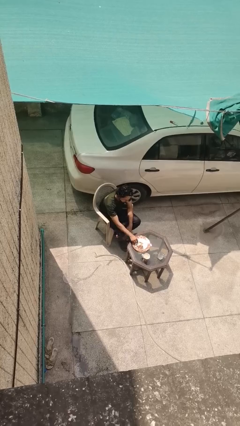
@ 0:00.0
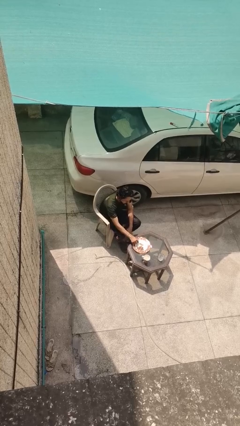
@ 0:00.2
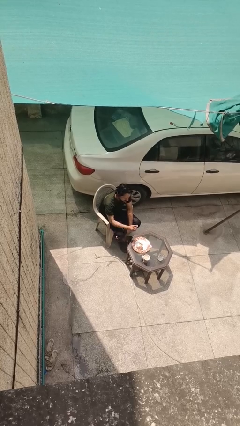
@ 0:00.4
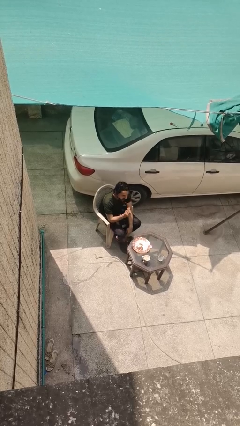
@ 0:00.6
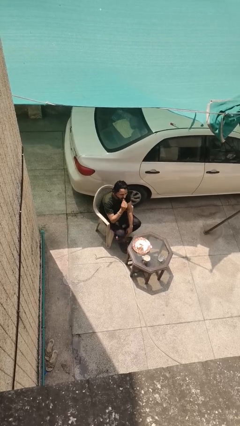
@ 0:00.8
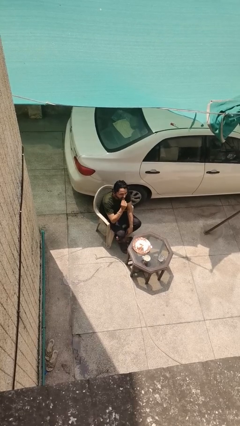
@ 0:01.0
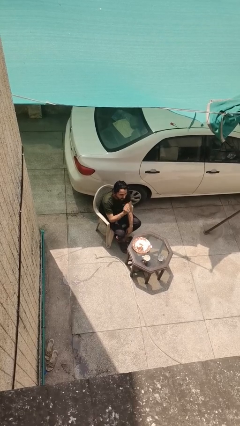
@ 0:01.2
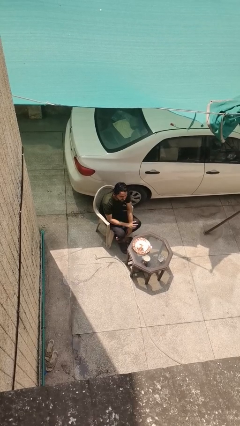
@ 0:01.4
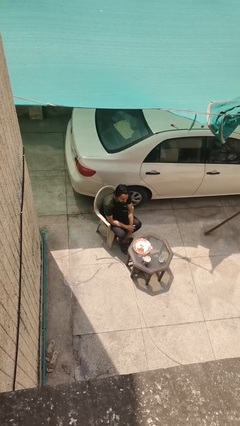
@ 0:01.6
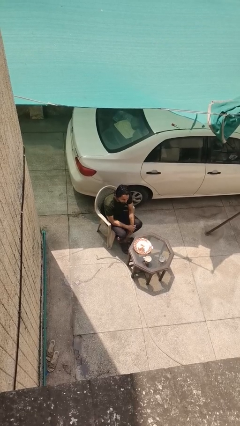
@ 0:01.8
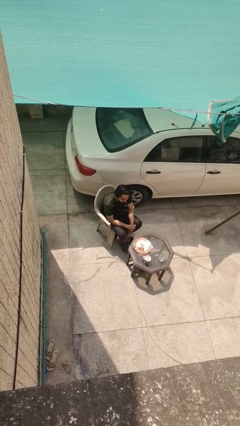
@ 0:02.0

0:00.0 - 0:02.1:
person eats with hands

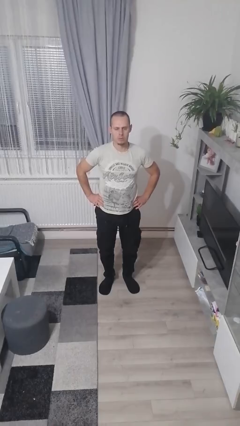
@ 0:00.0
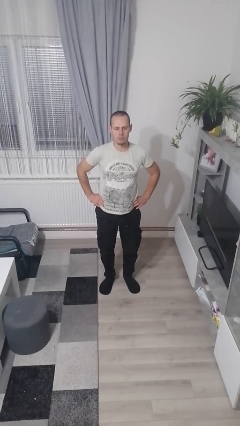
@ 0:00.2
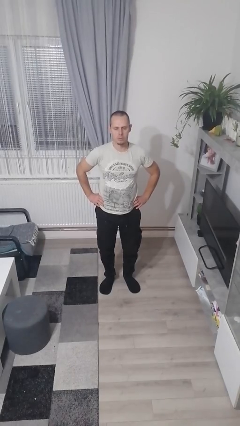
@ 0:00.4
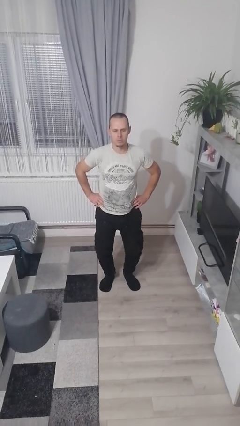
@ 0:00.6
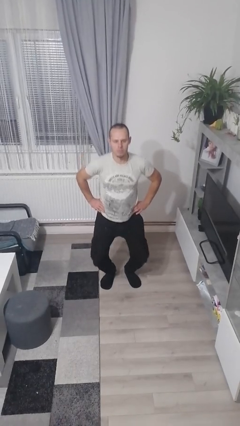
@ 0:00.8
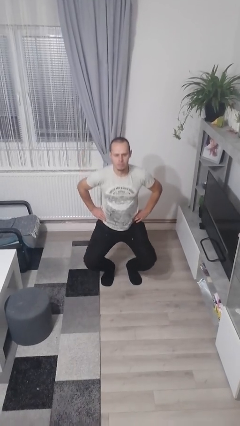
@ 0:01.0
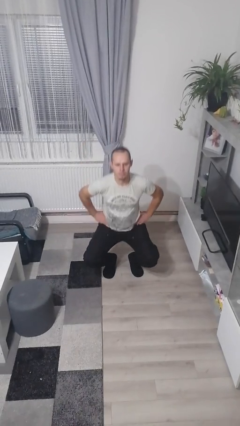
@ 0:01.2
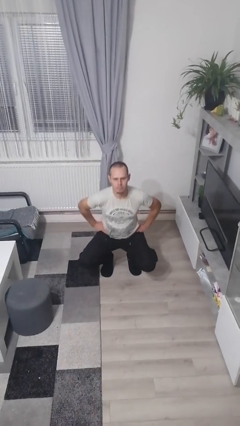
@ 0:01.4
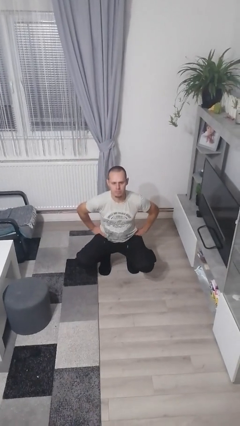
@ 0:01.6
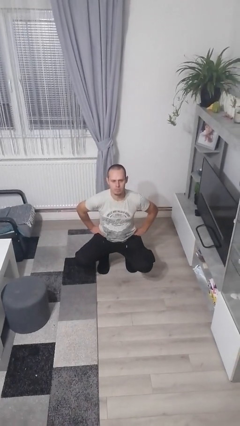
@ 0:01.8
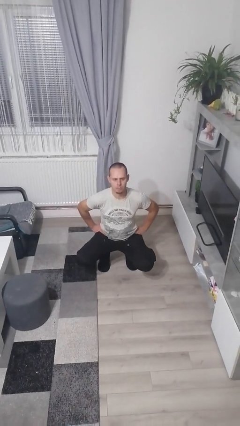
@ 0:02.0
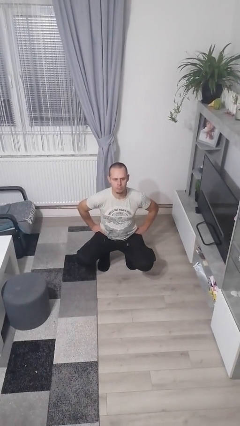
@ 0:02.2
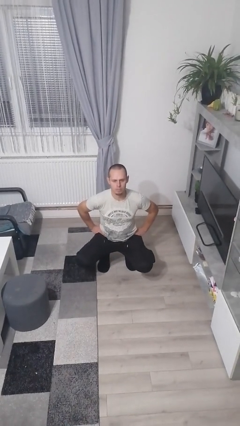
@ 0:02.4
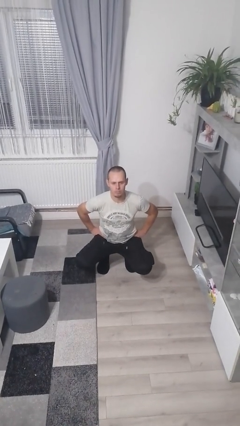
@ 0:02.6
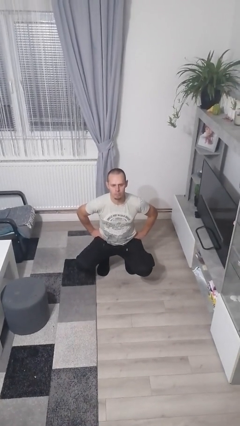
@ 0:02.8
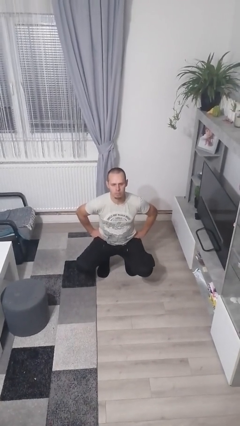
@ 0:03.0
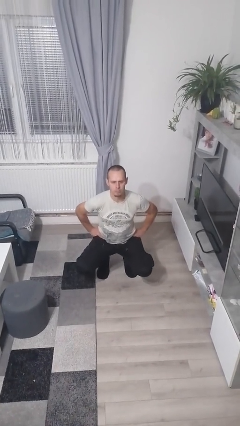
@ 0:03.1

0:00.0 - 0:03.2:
person squats

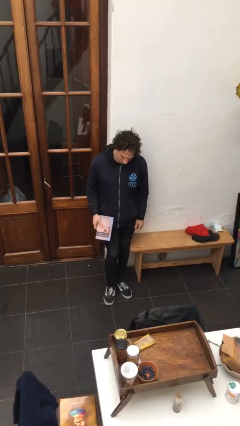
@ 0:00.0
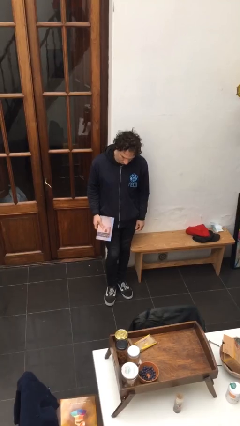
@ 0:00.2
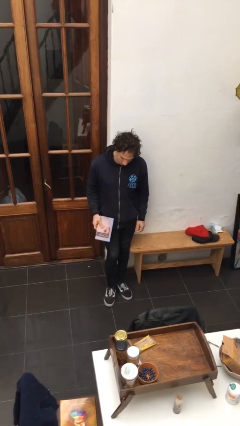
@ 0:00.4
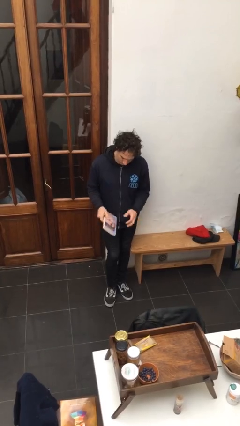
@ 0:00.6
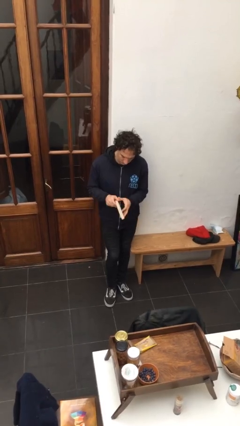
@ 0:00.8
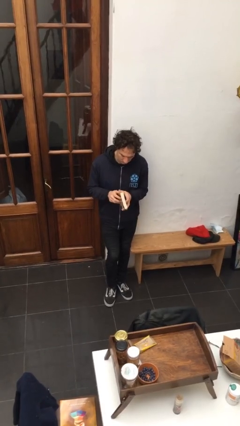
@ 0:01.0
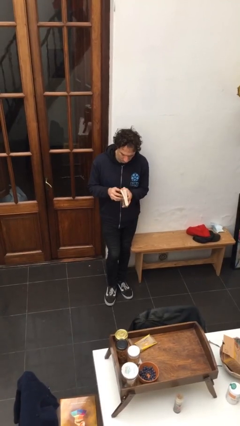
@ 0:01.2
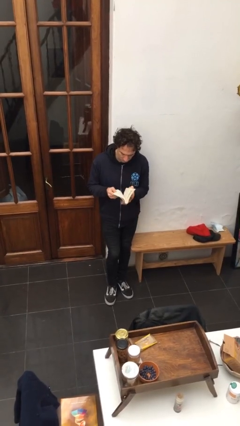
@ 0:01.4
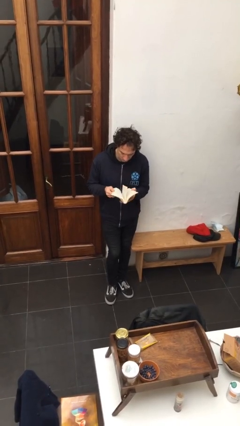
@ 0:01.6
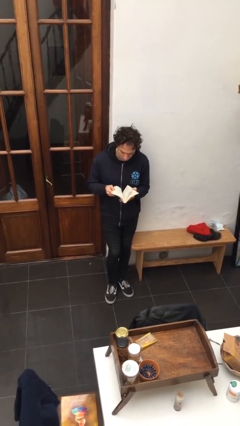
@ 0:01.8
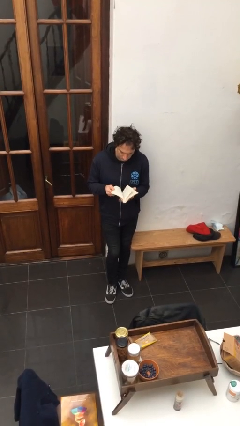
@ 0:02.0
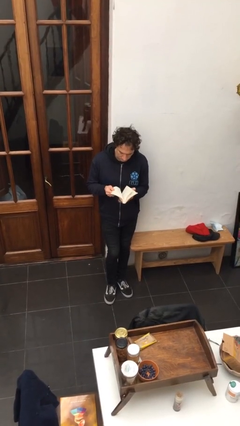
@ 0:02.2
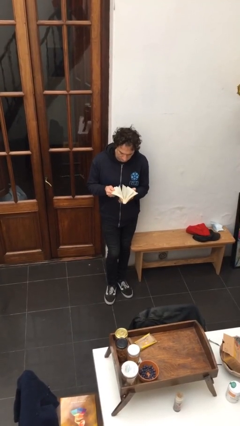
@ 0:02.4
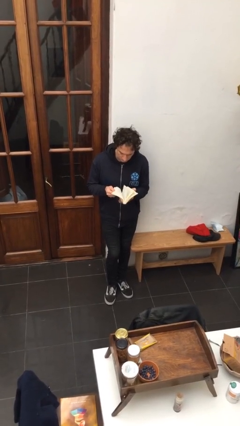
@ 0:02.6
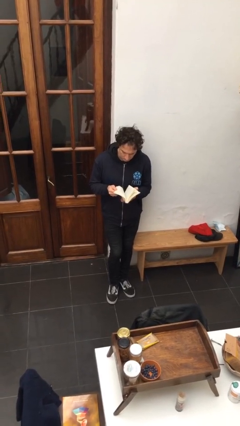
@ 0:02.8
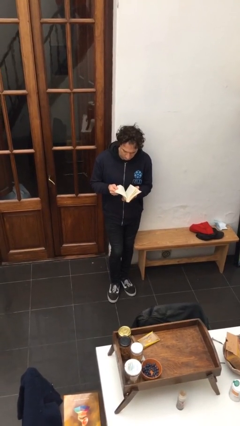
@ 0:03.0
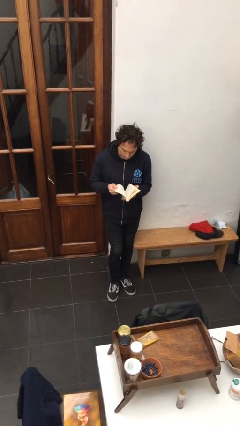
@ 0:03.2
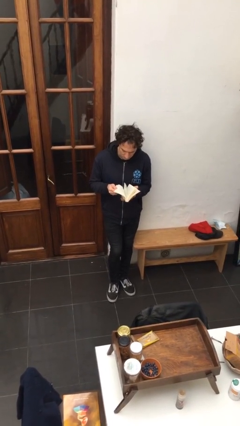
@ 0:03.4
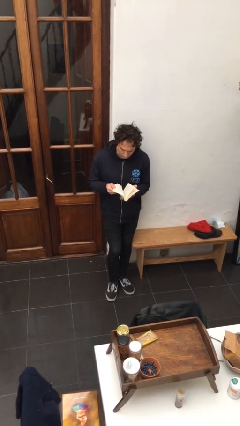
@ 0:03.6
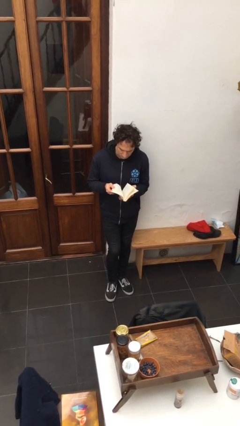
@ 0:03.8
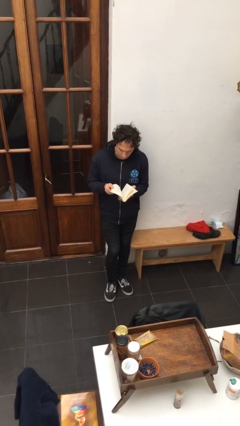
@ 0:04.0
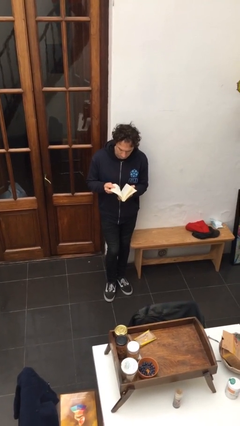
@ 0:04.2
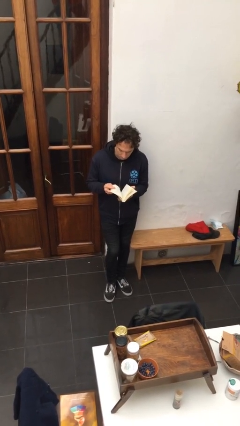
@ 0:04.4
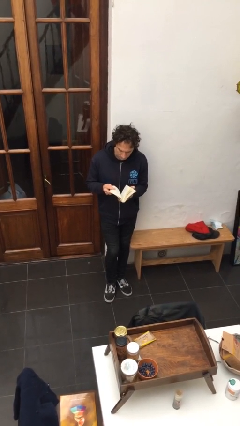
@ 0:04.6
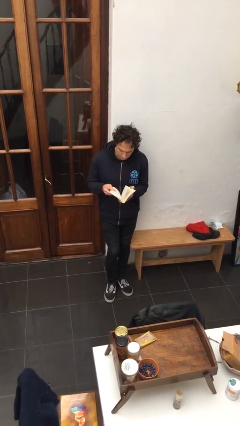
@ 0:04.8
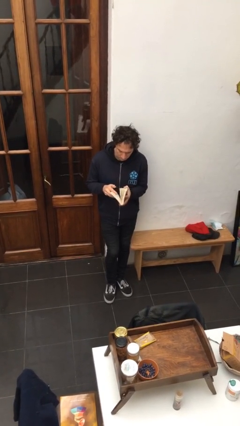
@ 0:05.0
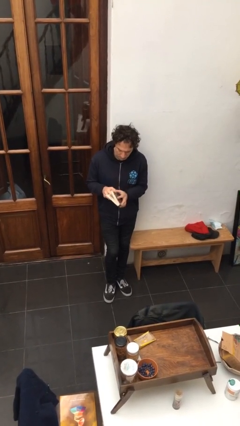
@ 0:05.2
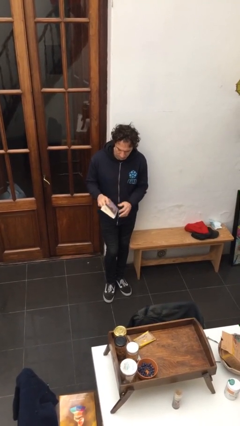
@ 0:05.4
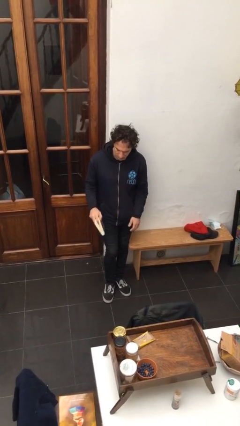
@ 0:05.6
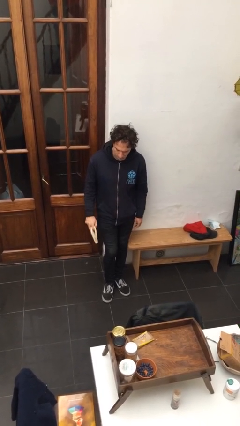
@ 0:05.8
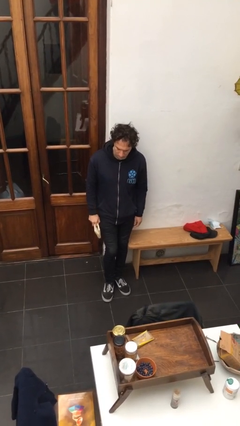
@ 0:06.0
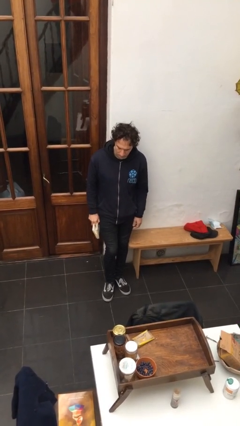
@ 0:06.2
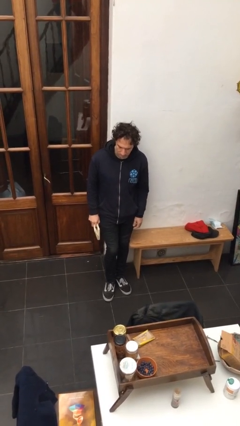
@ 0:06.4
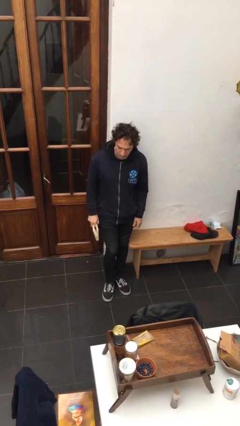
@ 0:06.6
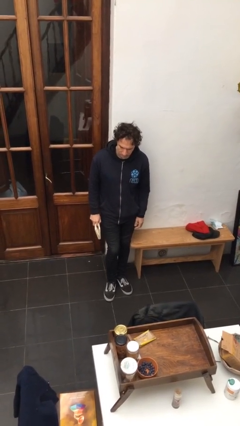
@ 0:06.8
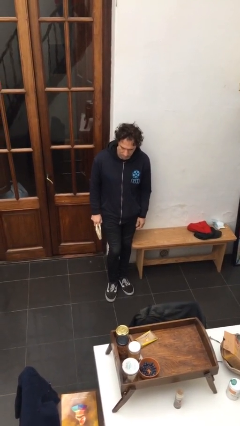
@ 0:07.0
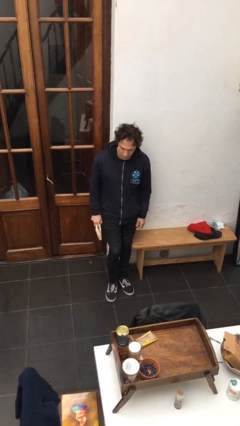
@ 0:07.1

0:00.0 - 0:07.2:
person reads book

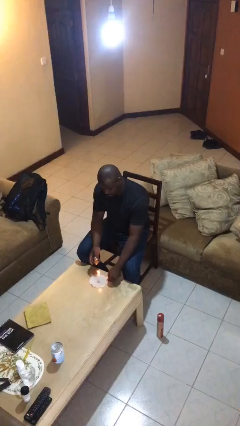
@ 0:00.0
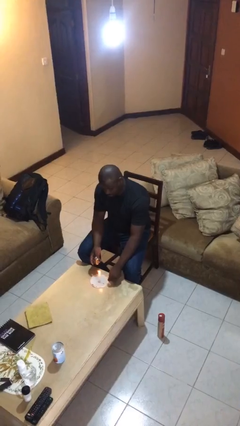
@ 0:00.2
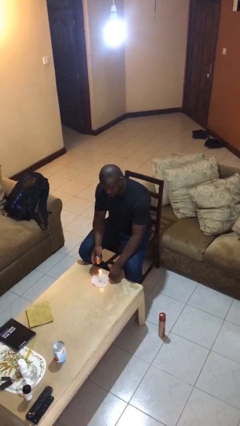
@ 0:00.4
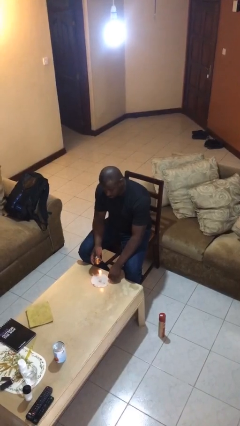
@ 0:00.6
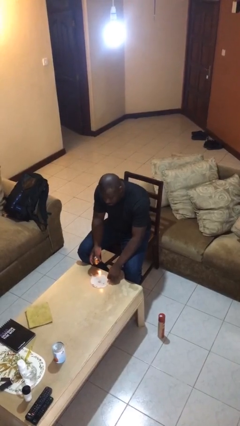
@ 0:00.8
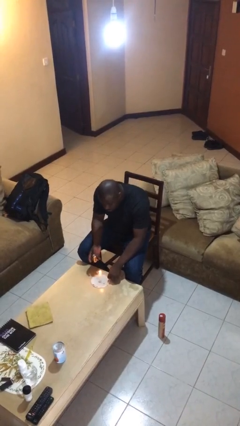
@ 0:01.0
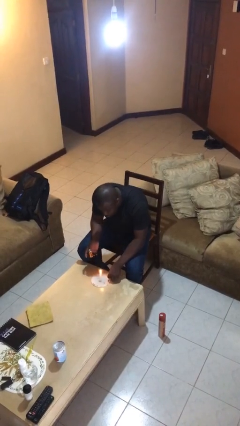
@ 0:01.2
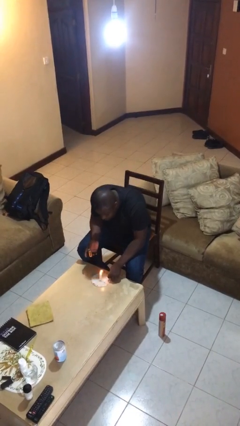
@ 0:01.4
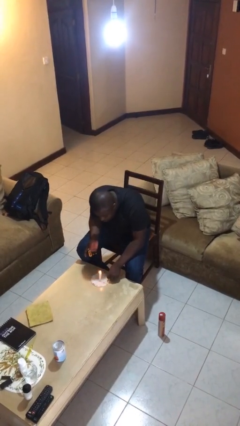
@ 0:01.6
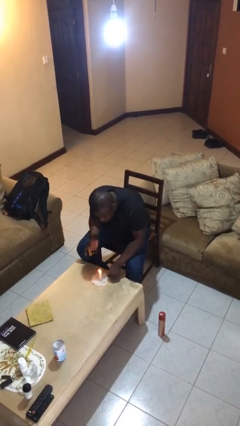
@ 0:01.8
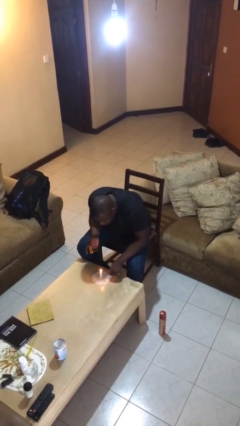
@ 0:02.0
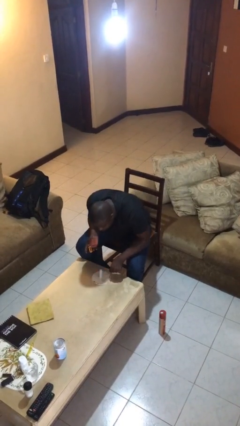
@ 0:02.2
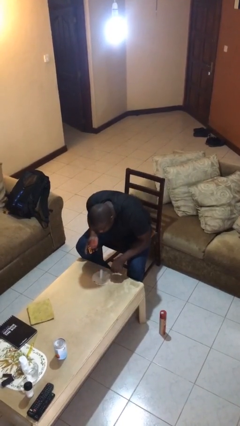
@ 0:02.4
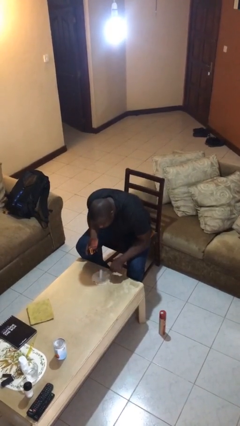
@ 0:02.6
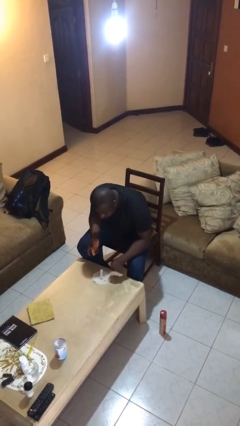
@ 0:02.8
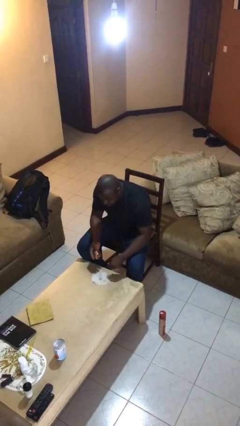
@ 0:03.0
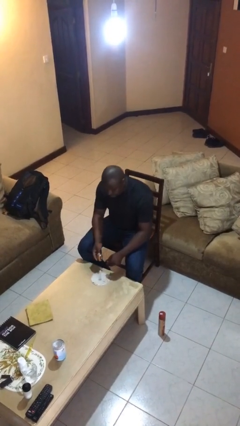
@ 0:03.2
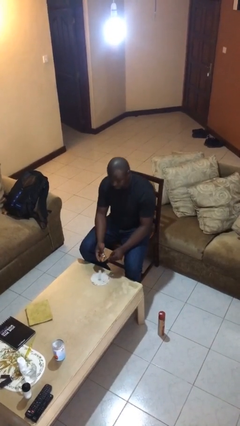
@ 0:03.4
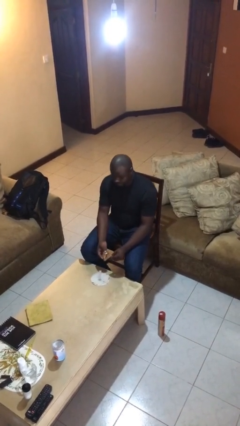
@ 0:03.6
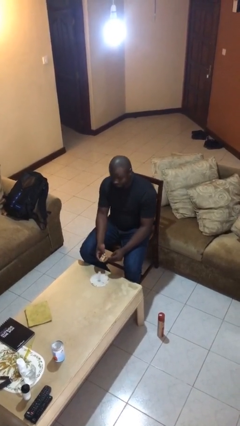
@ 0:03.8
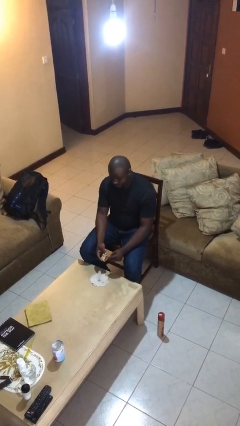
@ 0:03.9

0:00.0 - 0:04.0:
person extinguishes candle

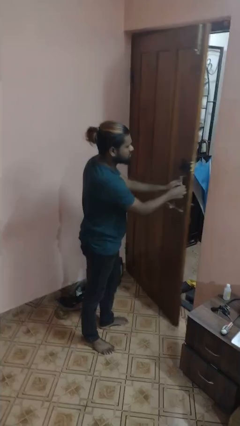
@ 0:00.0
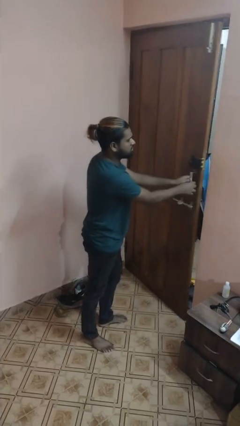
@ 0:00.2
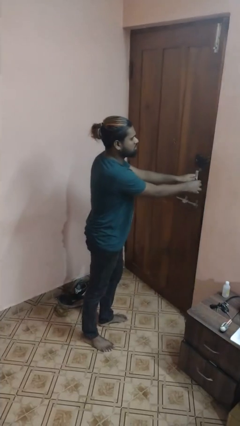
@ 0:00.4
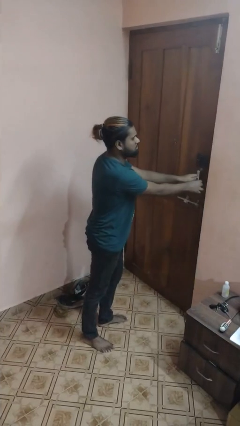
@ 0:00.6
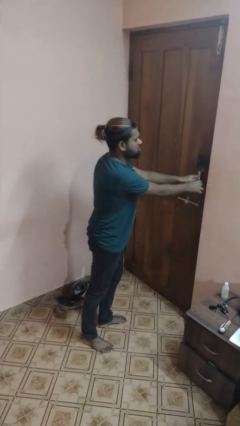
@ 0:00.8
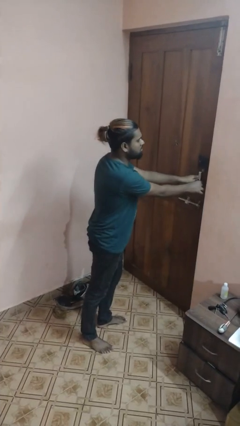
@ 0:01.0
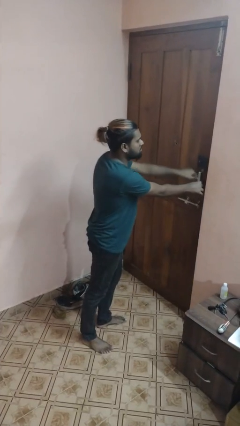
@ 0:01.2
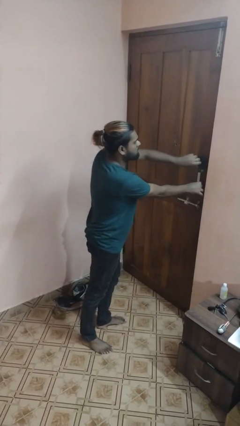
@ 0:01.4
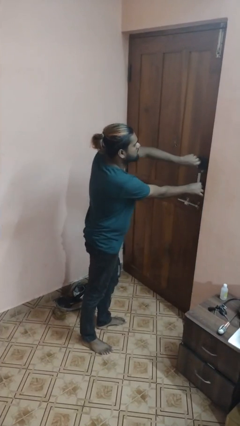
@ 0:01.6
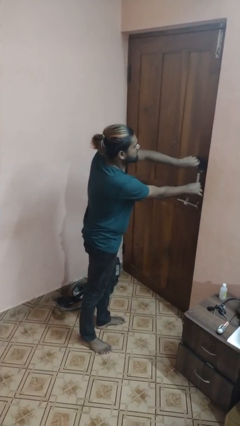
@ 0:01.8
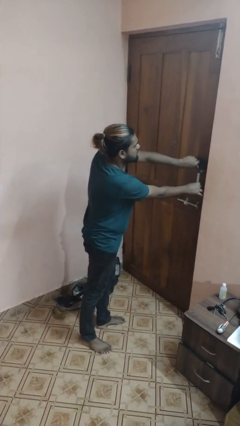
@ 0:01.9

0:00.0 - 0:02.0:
person closes facility door
